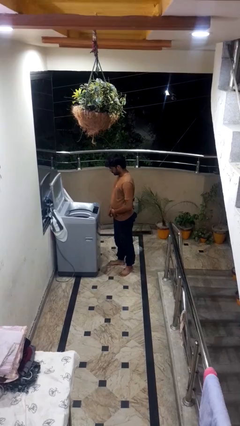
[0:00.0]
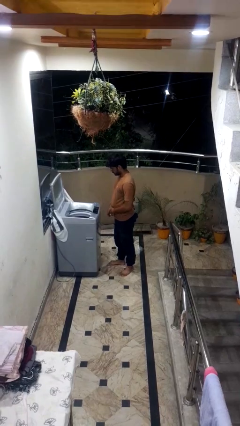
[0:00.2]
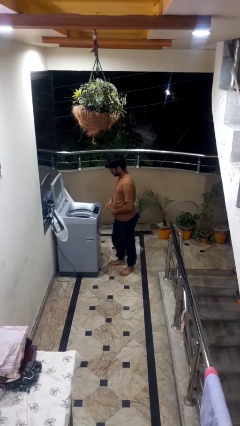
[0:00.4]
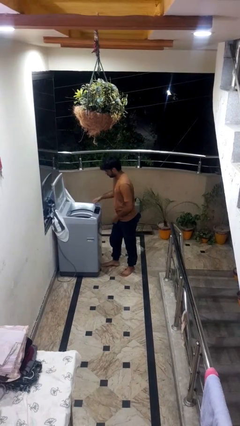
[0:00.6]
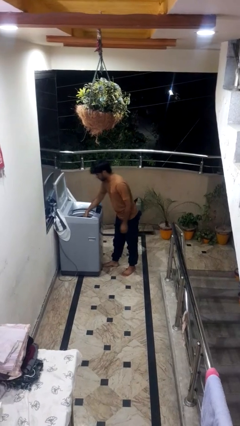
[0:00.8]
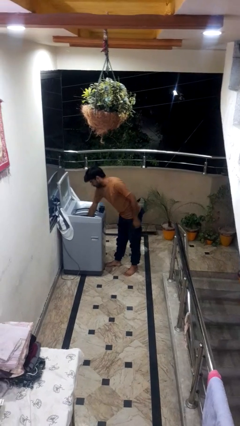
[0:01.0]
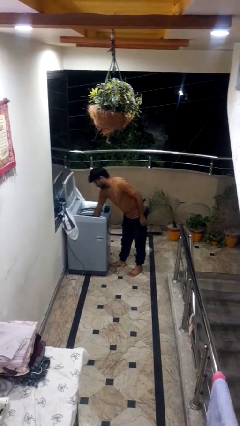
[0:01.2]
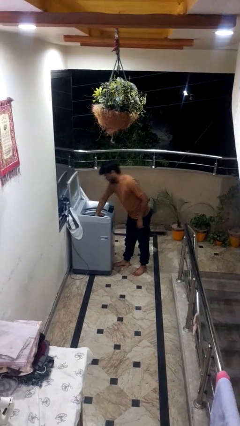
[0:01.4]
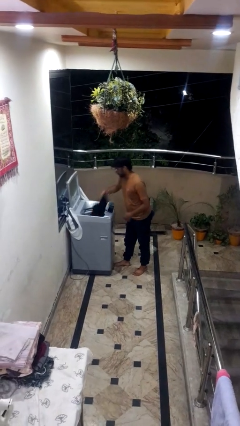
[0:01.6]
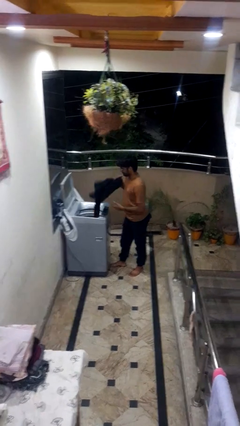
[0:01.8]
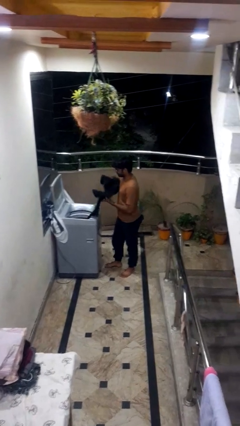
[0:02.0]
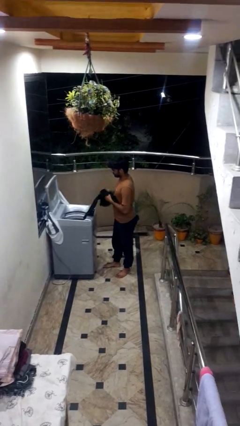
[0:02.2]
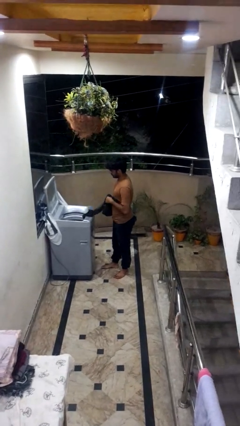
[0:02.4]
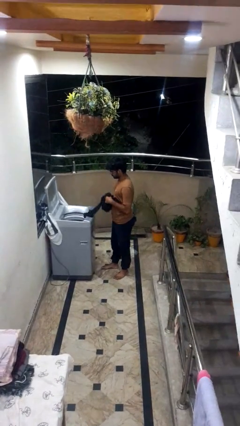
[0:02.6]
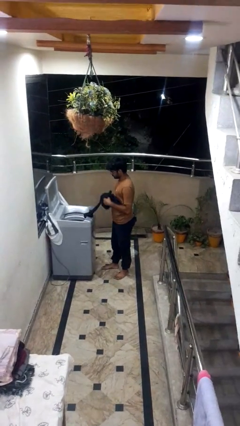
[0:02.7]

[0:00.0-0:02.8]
person loads clotheswasher

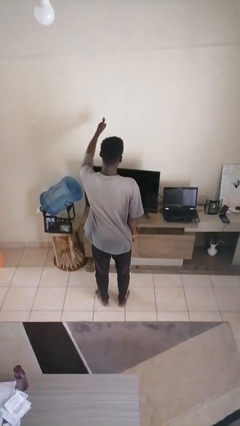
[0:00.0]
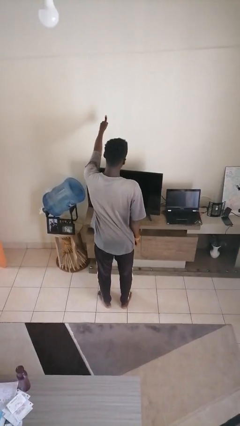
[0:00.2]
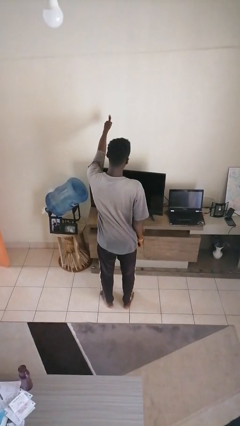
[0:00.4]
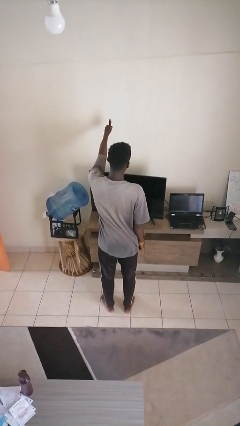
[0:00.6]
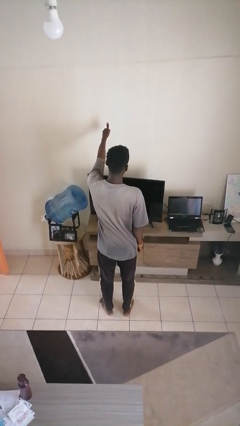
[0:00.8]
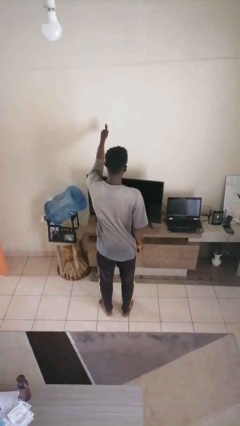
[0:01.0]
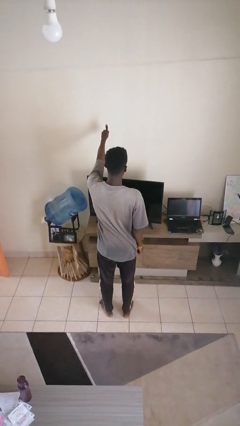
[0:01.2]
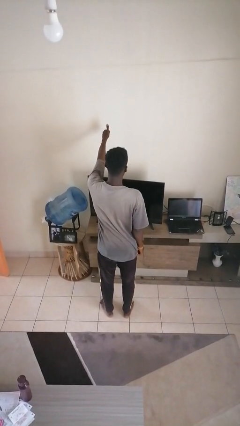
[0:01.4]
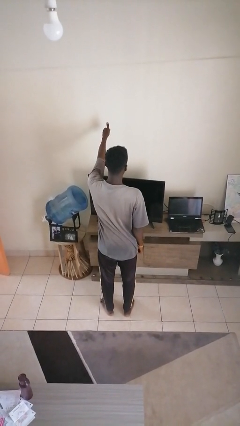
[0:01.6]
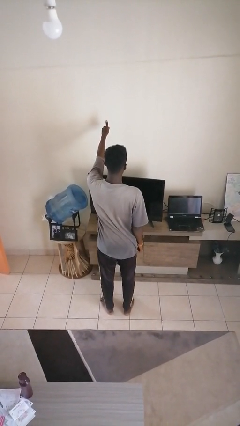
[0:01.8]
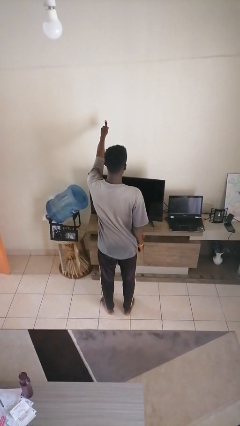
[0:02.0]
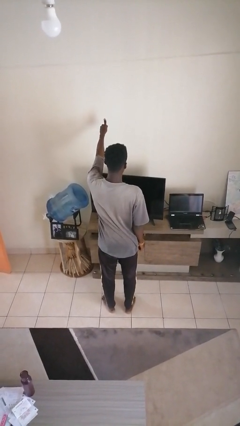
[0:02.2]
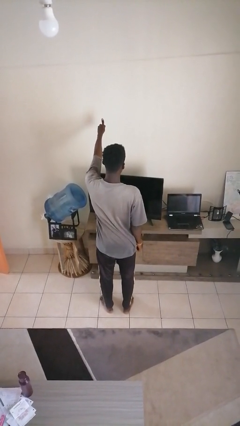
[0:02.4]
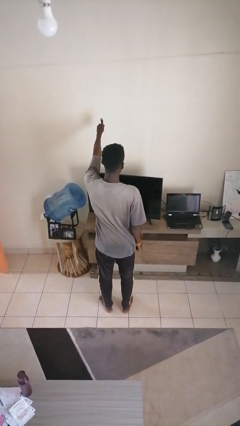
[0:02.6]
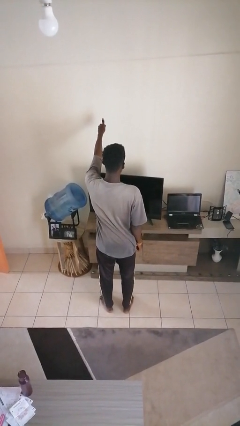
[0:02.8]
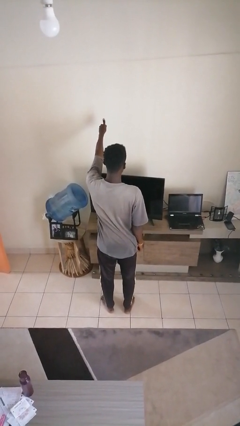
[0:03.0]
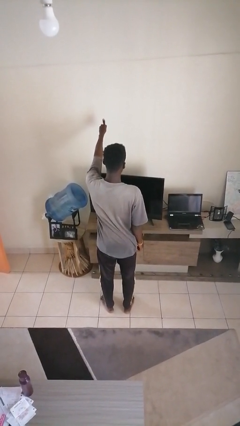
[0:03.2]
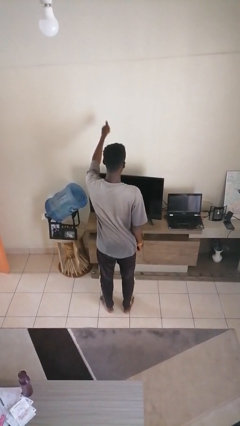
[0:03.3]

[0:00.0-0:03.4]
person gestures thumbs up

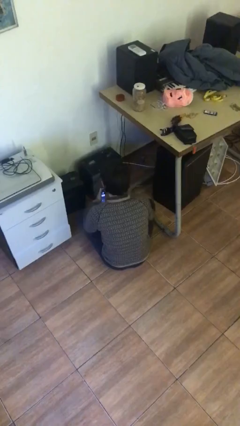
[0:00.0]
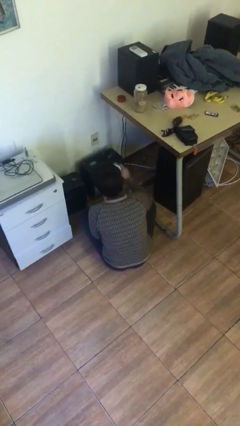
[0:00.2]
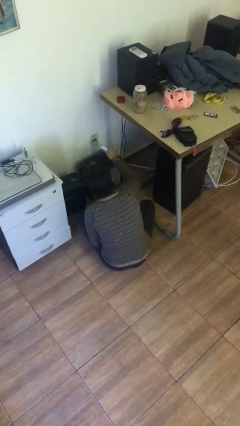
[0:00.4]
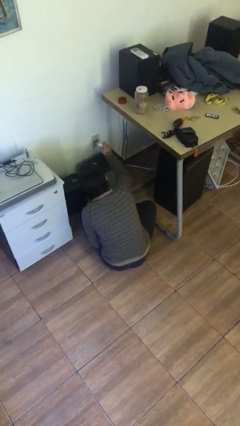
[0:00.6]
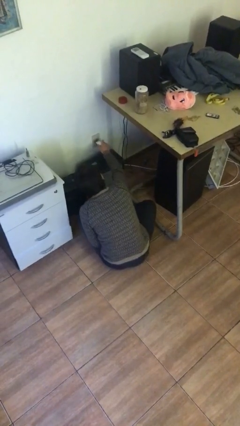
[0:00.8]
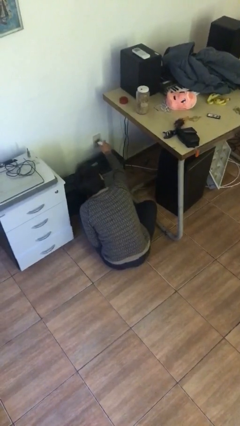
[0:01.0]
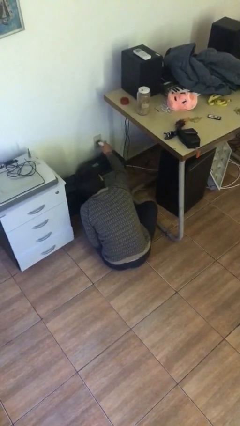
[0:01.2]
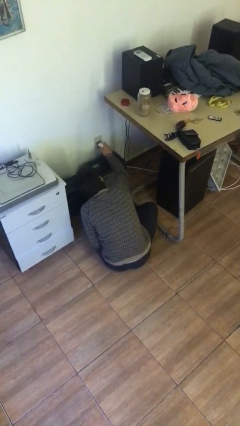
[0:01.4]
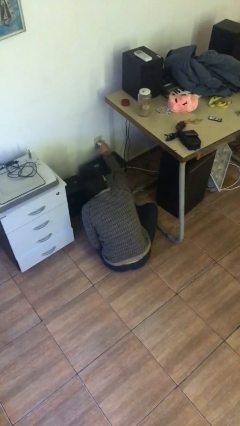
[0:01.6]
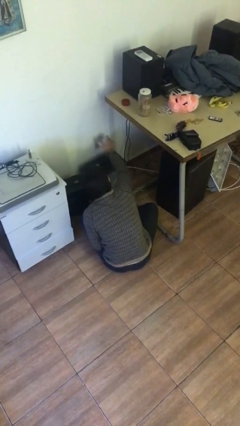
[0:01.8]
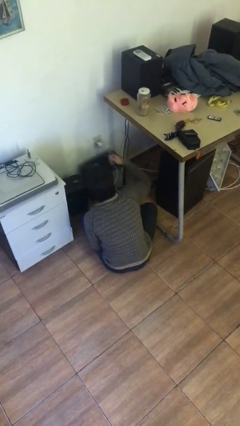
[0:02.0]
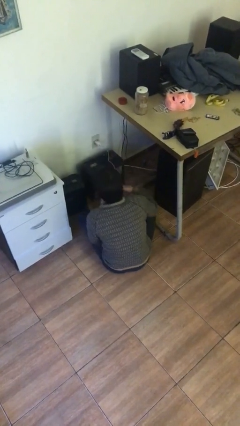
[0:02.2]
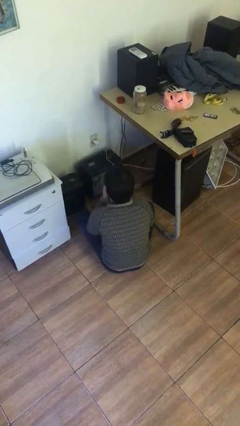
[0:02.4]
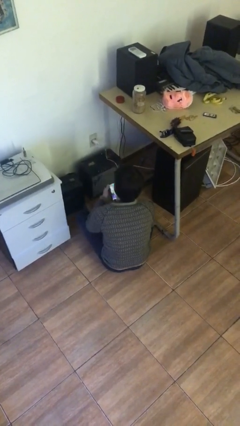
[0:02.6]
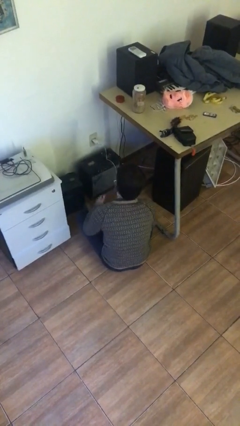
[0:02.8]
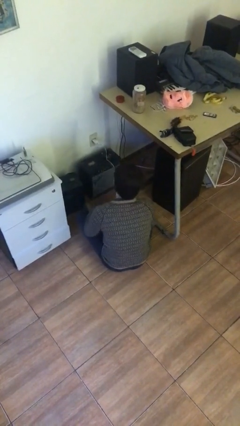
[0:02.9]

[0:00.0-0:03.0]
person plugs into electrical socket

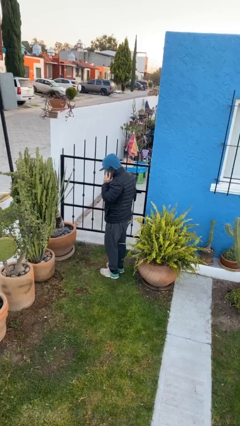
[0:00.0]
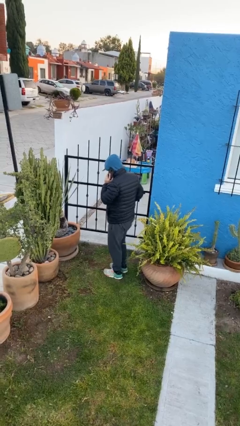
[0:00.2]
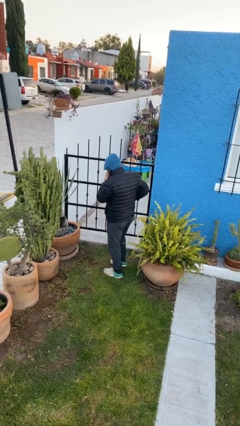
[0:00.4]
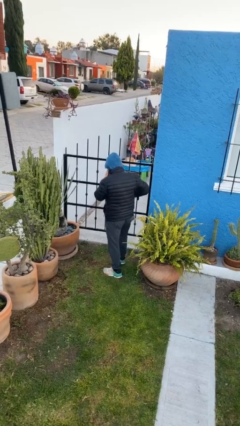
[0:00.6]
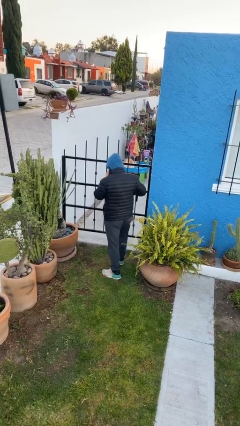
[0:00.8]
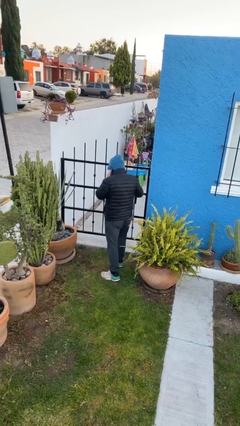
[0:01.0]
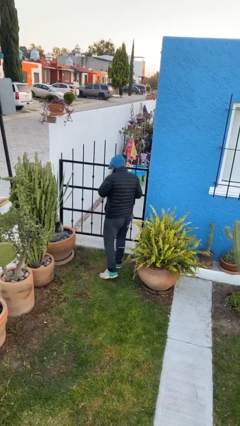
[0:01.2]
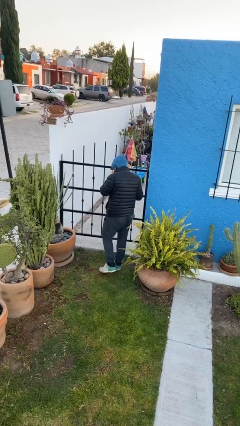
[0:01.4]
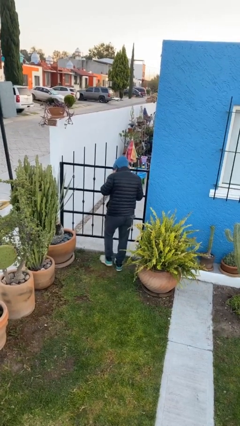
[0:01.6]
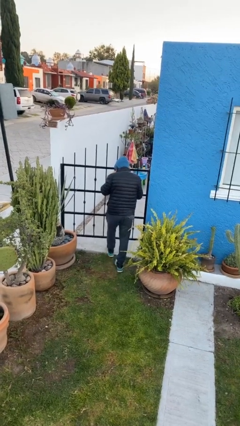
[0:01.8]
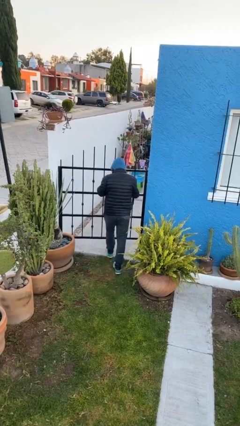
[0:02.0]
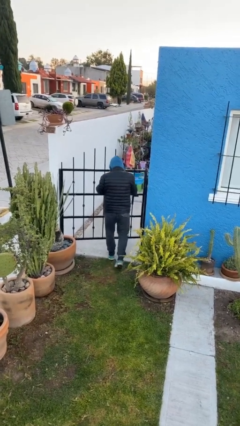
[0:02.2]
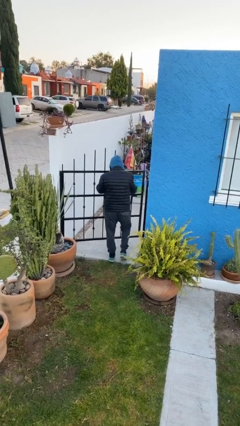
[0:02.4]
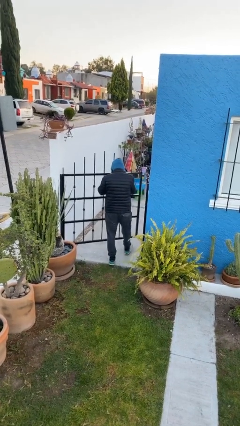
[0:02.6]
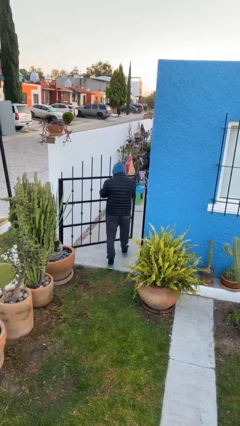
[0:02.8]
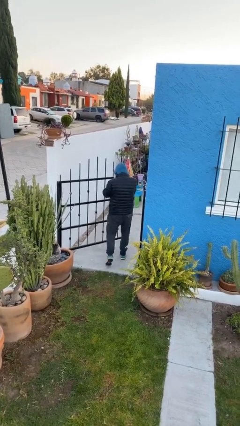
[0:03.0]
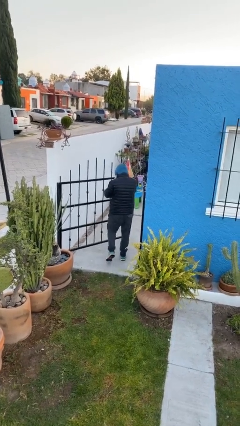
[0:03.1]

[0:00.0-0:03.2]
person opens facility door

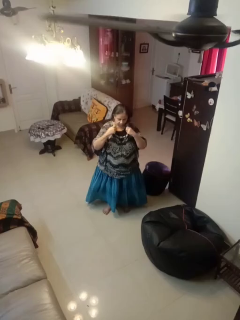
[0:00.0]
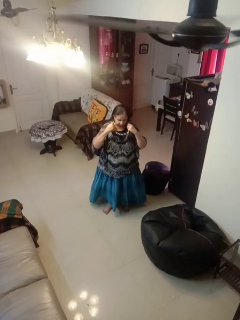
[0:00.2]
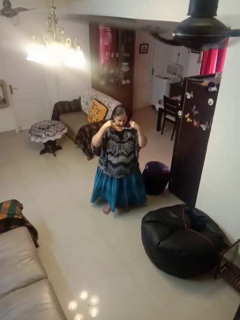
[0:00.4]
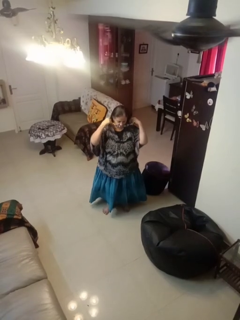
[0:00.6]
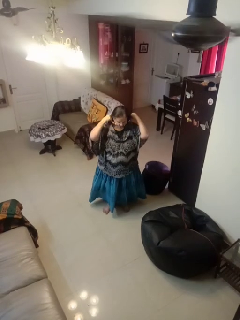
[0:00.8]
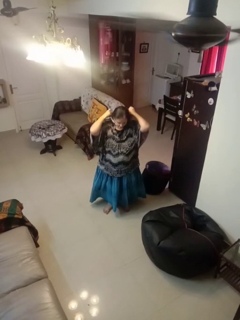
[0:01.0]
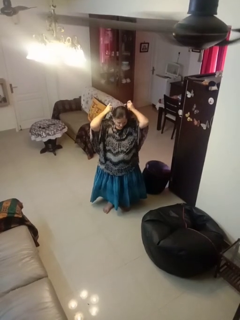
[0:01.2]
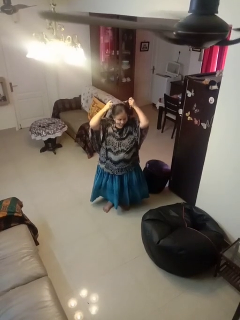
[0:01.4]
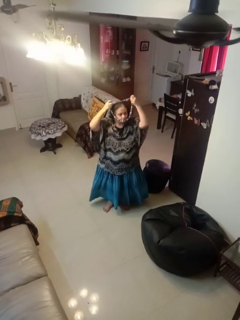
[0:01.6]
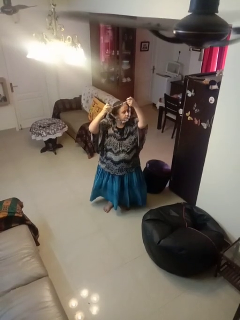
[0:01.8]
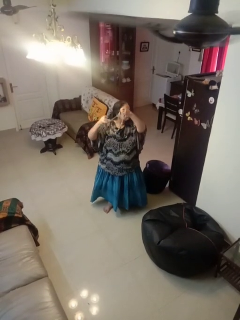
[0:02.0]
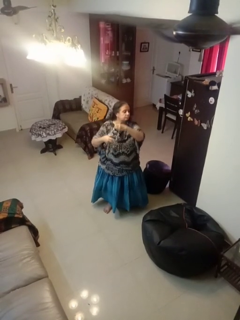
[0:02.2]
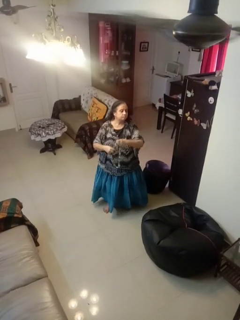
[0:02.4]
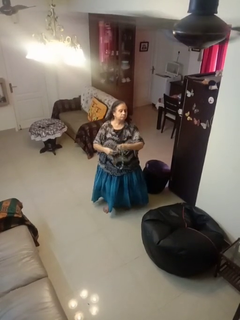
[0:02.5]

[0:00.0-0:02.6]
person takes off necklace

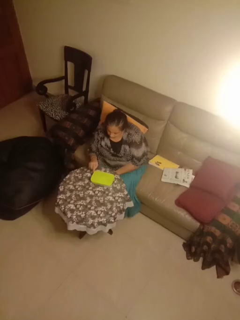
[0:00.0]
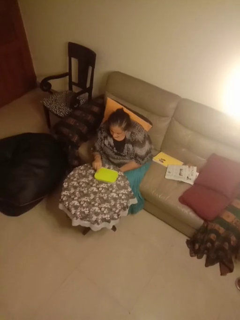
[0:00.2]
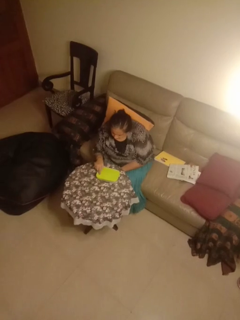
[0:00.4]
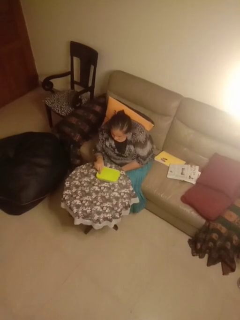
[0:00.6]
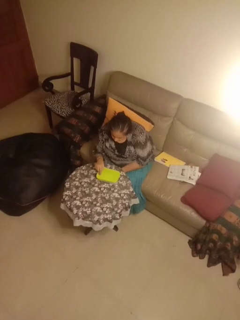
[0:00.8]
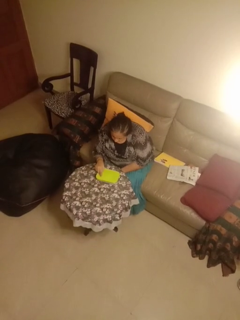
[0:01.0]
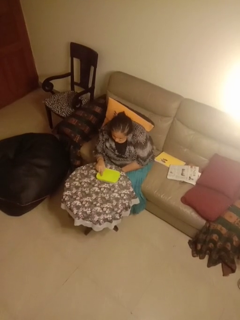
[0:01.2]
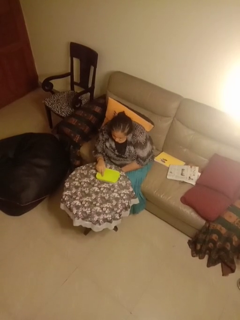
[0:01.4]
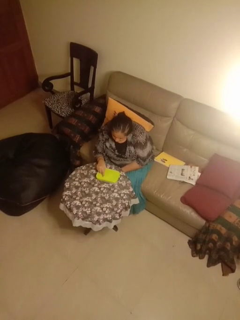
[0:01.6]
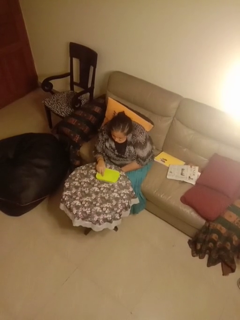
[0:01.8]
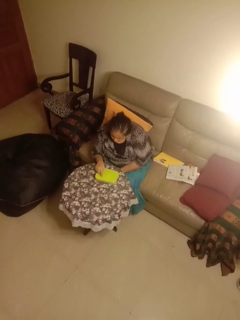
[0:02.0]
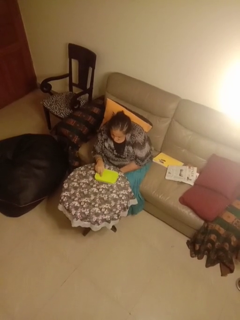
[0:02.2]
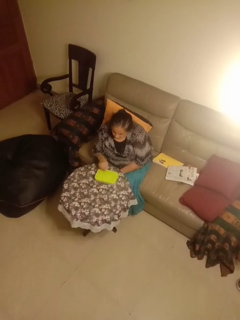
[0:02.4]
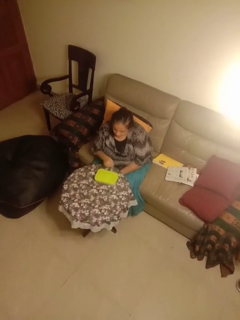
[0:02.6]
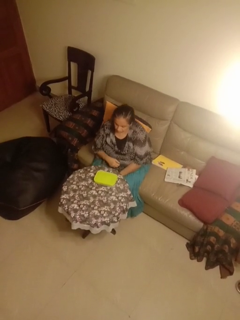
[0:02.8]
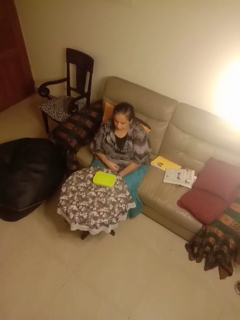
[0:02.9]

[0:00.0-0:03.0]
person taps object with finger

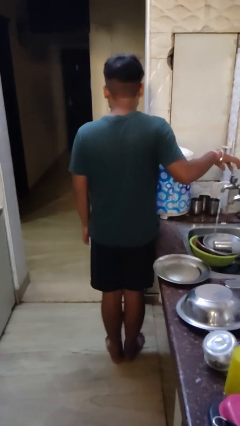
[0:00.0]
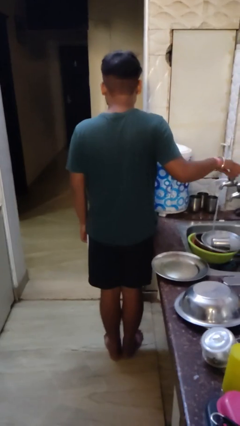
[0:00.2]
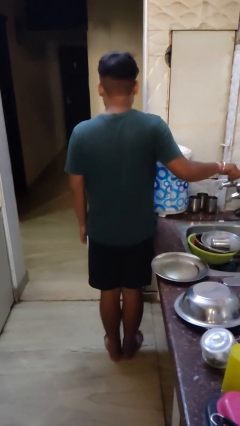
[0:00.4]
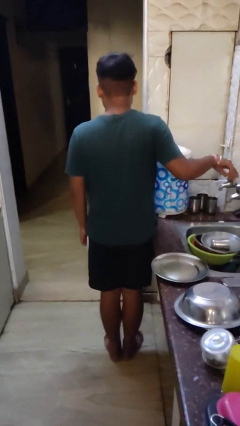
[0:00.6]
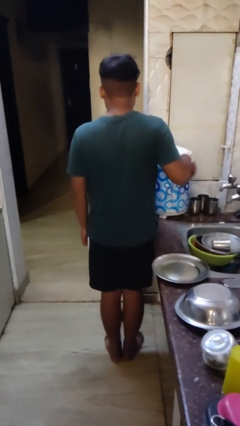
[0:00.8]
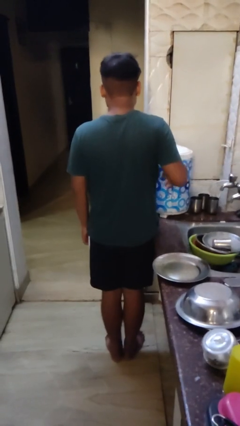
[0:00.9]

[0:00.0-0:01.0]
person turns off faucet
